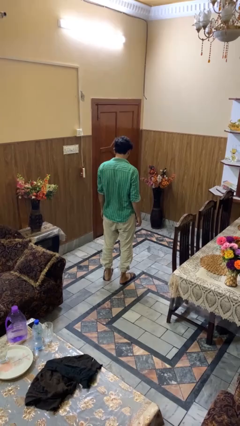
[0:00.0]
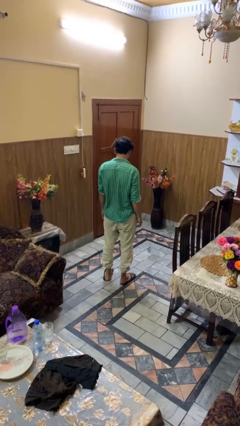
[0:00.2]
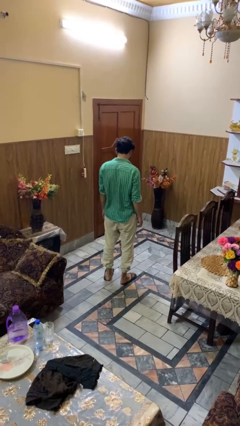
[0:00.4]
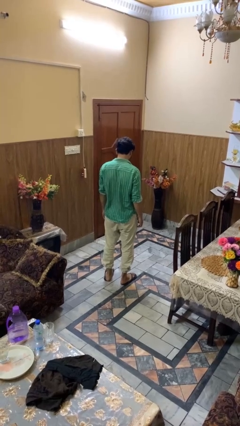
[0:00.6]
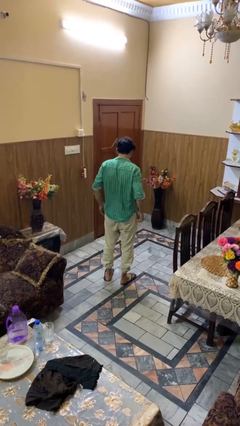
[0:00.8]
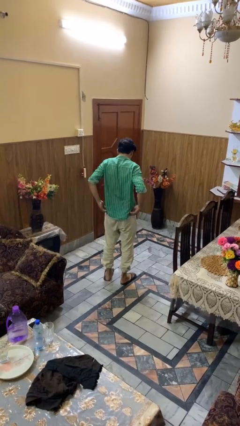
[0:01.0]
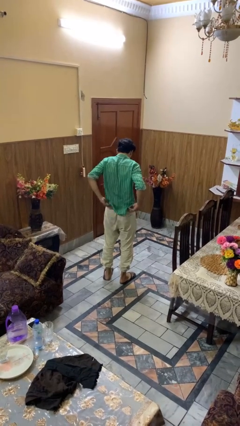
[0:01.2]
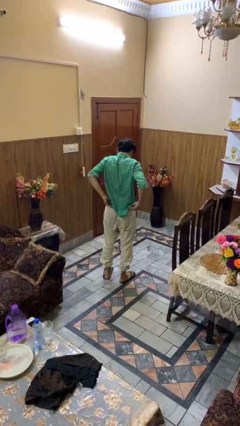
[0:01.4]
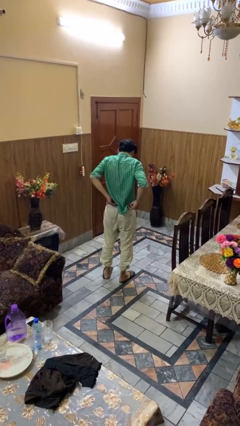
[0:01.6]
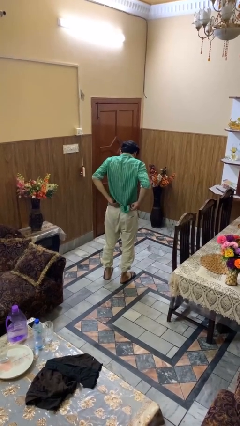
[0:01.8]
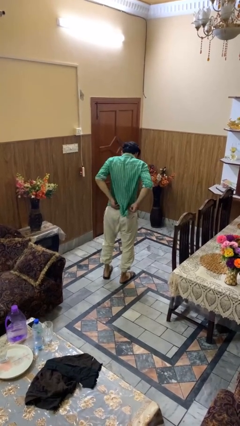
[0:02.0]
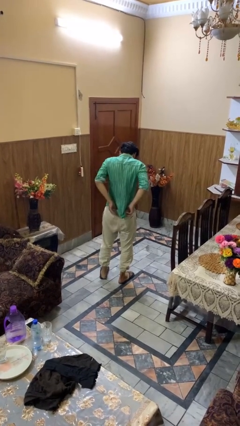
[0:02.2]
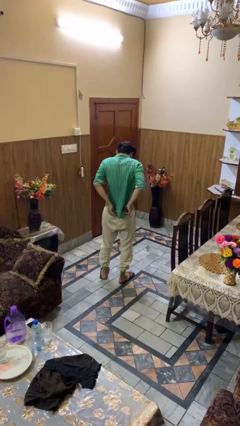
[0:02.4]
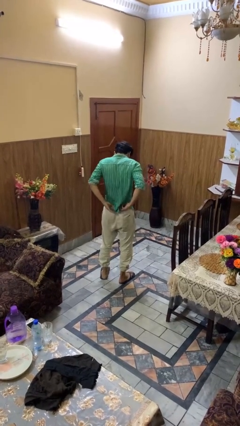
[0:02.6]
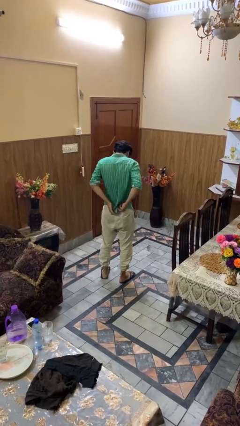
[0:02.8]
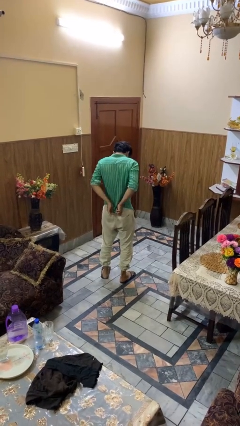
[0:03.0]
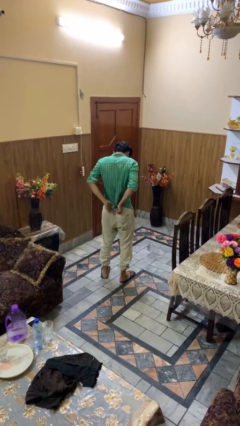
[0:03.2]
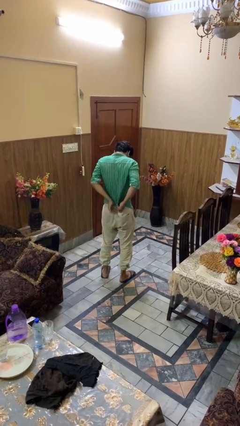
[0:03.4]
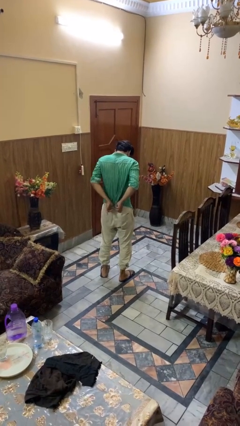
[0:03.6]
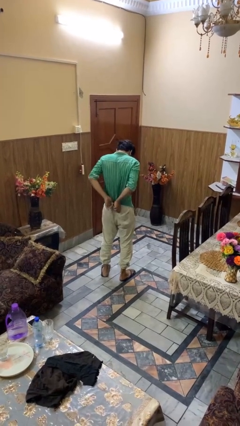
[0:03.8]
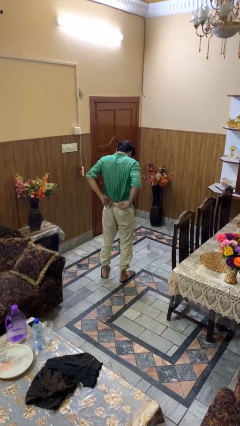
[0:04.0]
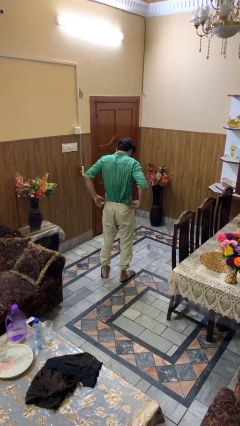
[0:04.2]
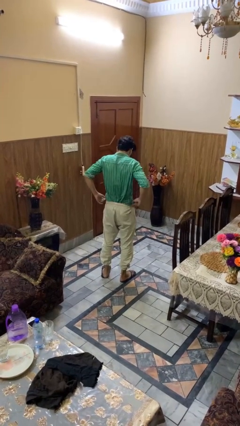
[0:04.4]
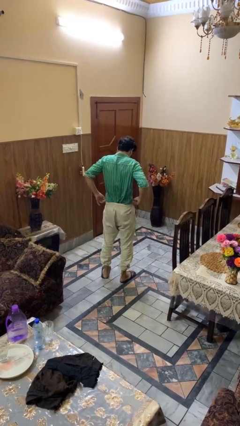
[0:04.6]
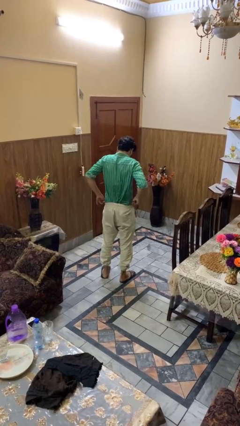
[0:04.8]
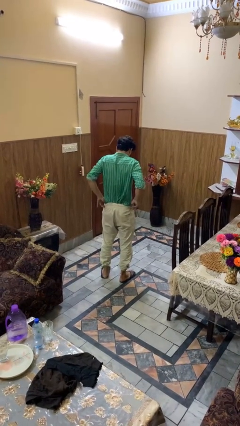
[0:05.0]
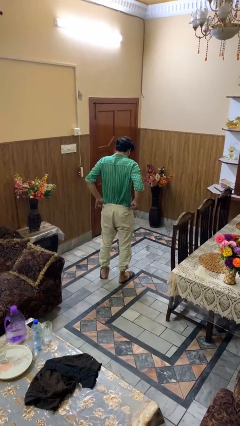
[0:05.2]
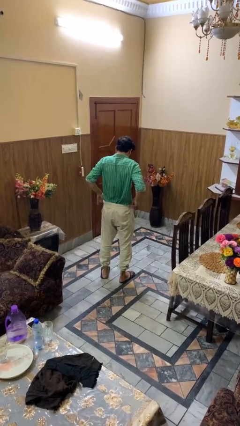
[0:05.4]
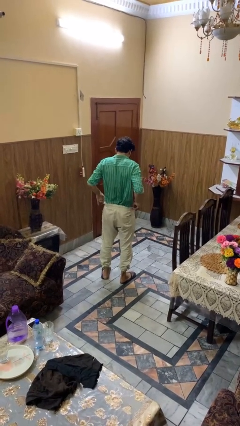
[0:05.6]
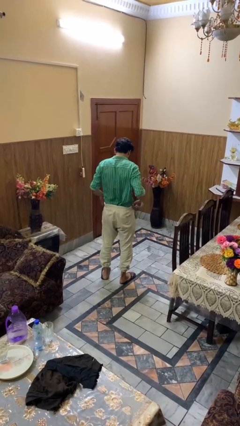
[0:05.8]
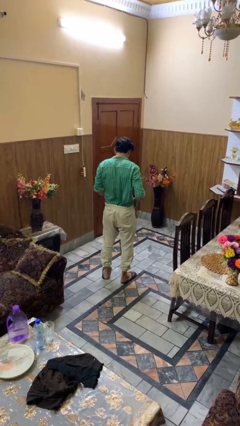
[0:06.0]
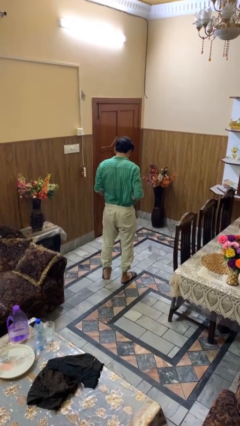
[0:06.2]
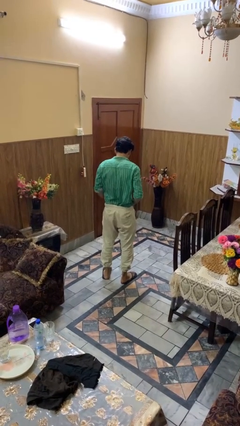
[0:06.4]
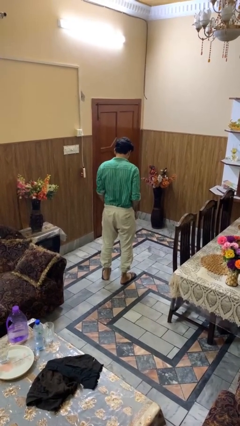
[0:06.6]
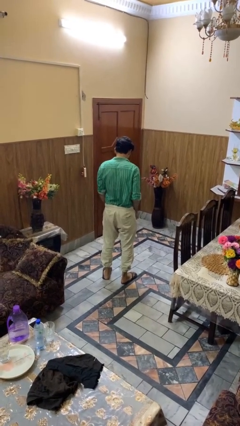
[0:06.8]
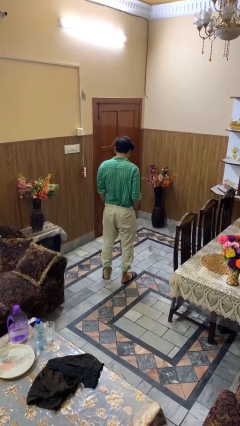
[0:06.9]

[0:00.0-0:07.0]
person tucks in shirt

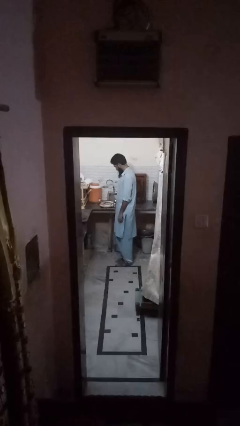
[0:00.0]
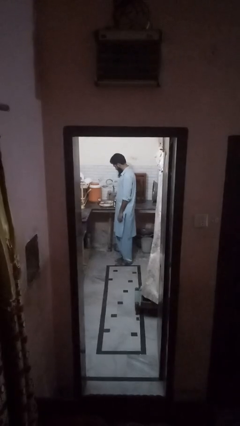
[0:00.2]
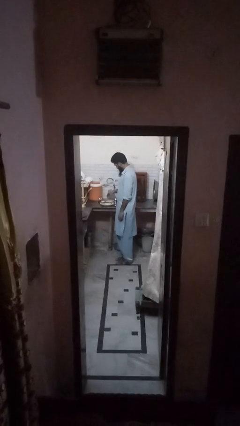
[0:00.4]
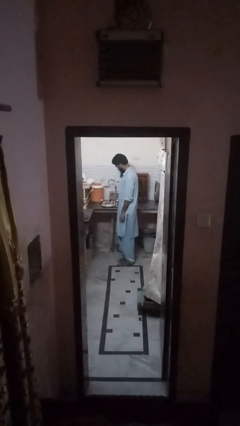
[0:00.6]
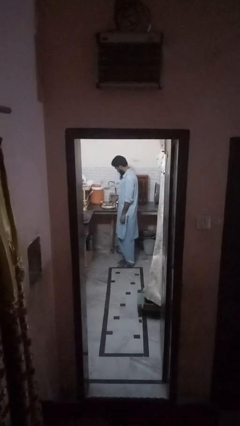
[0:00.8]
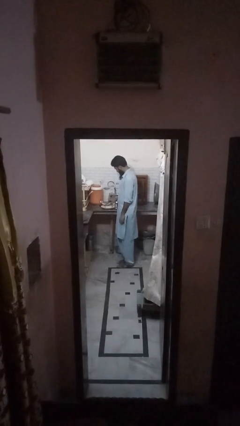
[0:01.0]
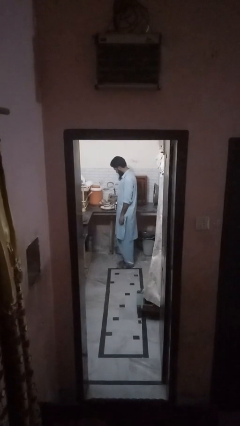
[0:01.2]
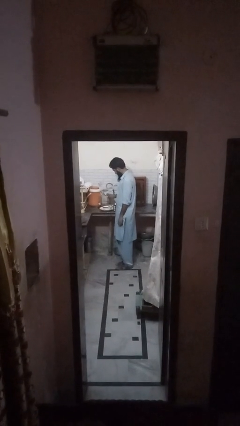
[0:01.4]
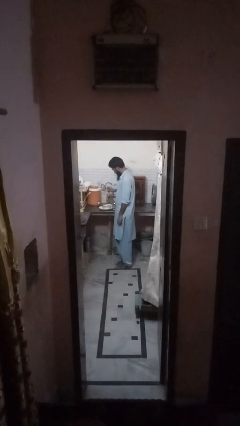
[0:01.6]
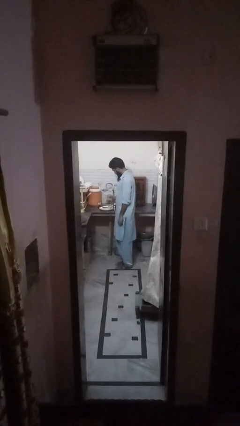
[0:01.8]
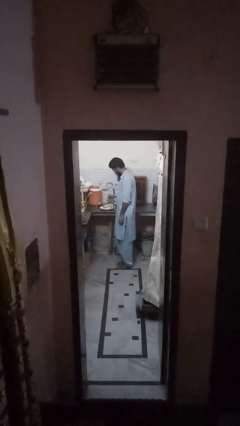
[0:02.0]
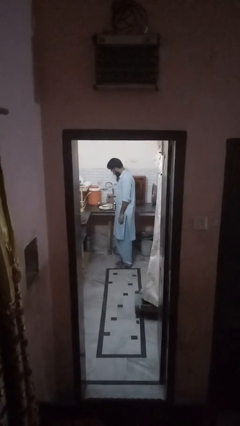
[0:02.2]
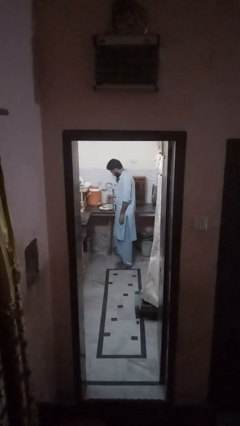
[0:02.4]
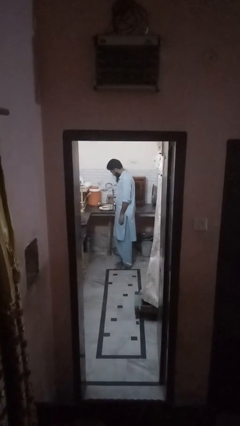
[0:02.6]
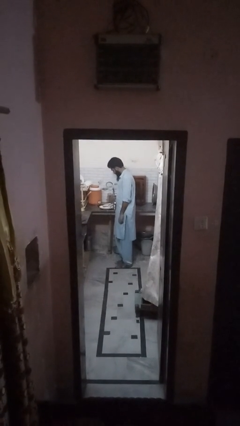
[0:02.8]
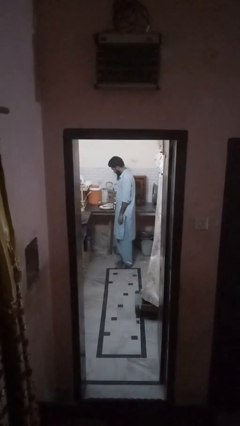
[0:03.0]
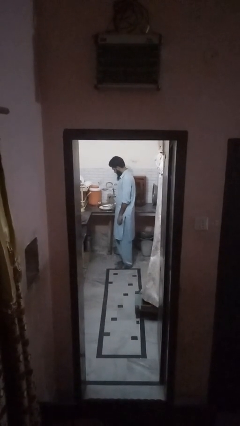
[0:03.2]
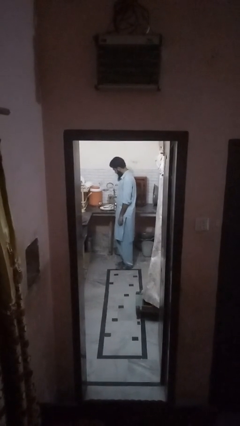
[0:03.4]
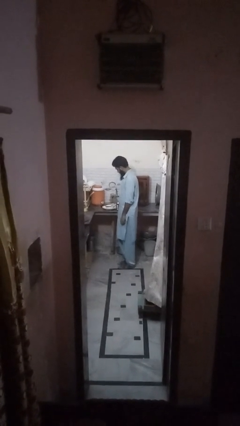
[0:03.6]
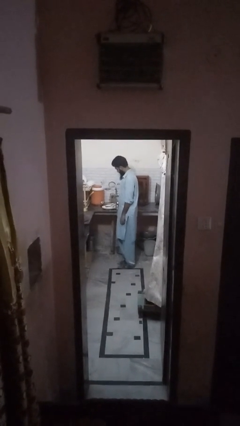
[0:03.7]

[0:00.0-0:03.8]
person loads dishwasher

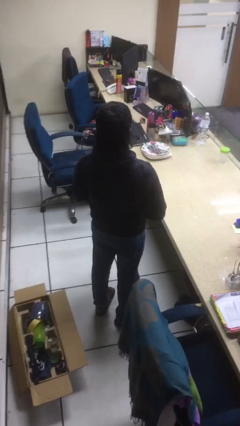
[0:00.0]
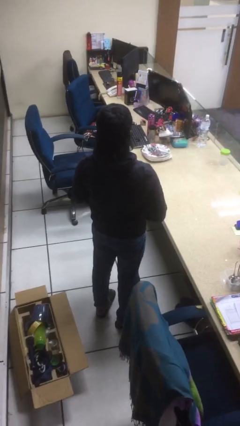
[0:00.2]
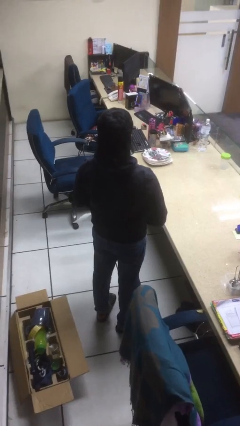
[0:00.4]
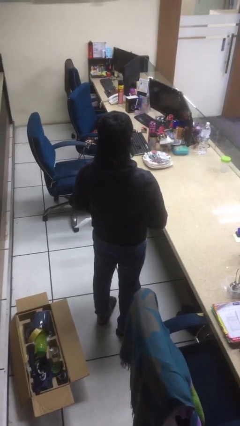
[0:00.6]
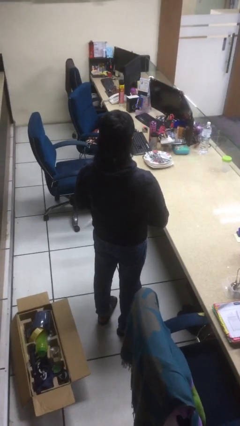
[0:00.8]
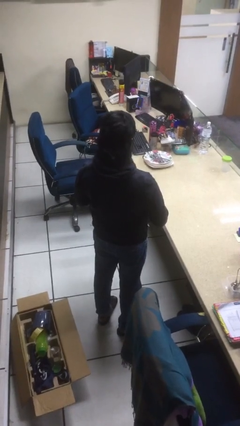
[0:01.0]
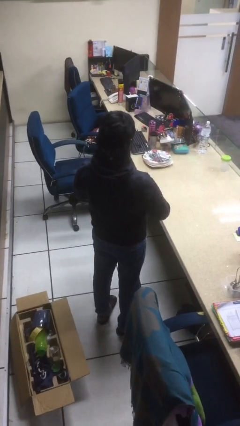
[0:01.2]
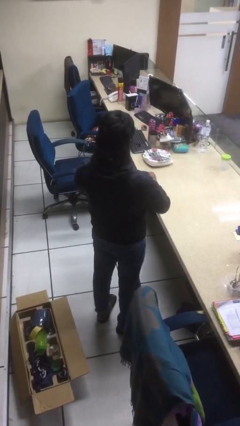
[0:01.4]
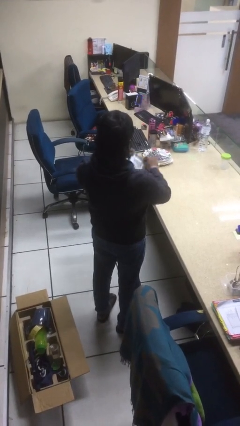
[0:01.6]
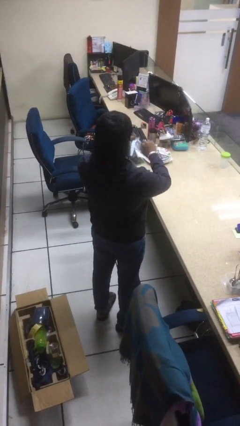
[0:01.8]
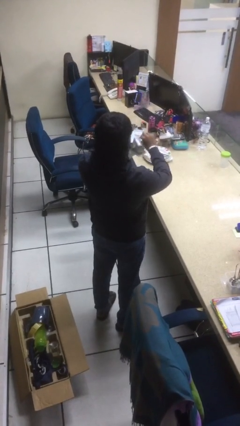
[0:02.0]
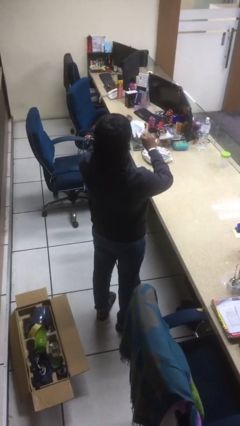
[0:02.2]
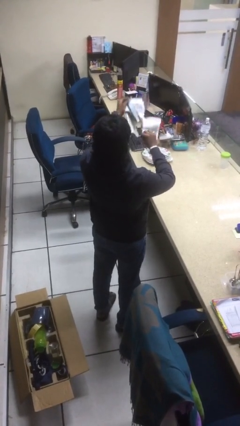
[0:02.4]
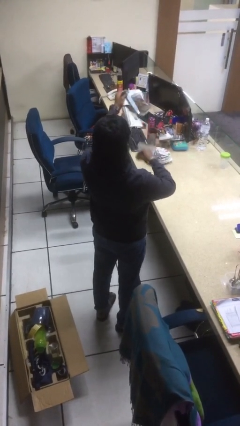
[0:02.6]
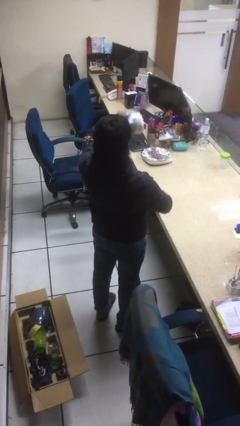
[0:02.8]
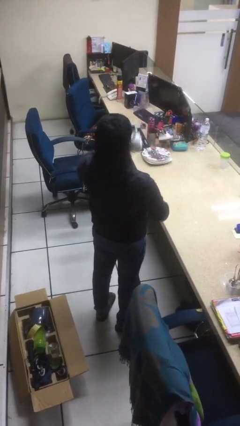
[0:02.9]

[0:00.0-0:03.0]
person tears paper

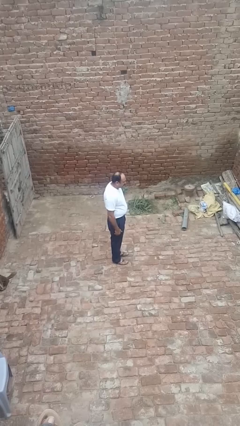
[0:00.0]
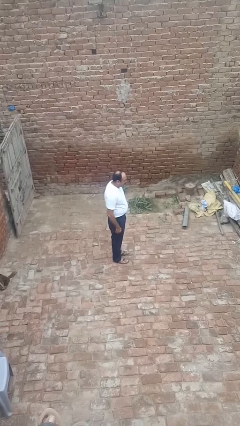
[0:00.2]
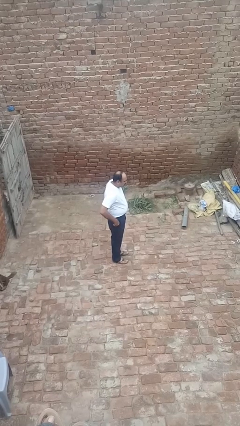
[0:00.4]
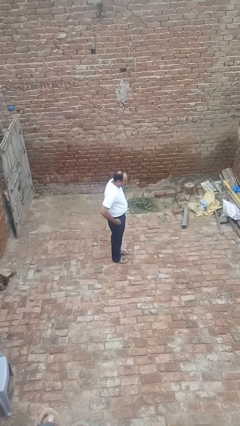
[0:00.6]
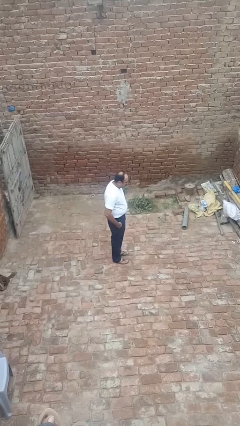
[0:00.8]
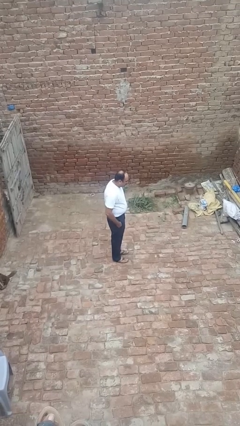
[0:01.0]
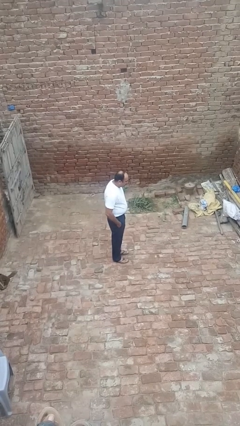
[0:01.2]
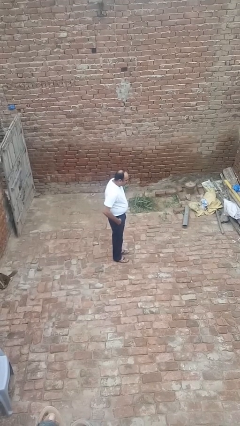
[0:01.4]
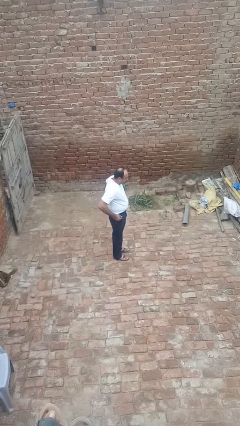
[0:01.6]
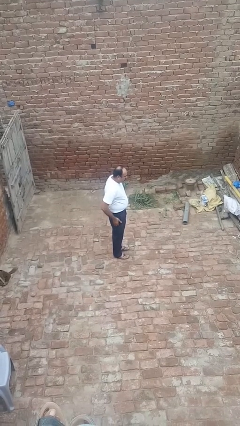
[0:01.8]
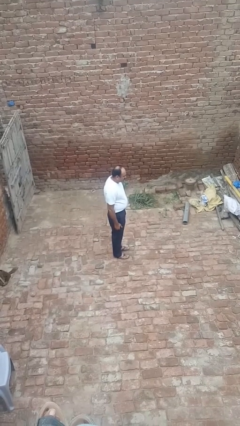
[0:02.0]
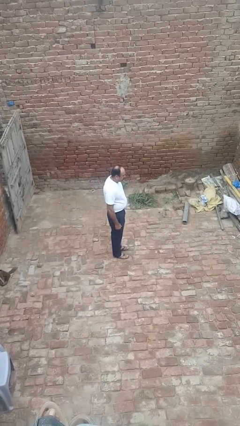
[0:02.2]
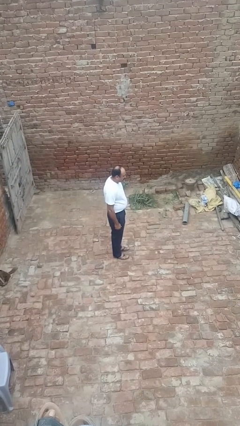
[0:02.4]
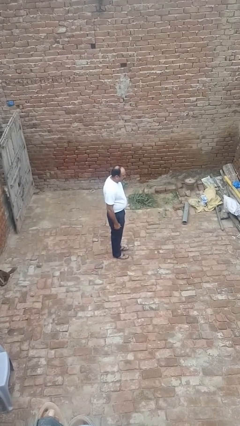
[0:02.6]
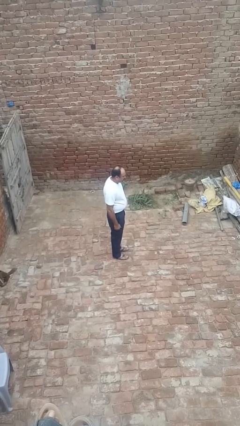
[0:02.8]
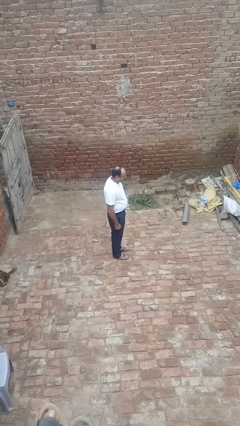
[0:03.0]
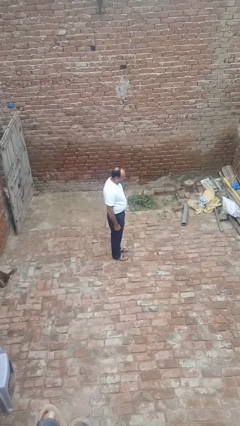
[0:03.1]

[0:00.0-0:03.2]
person puts hands in back pockets

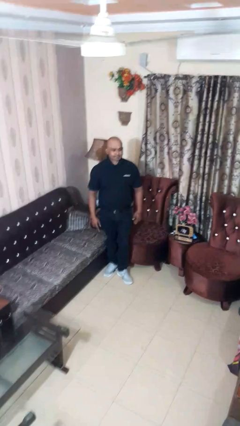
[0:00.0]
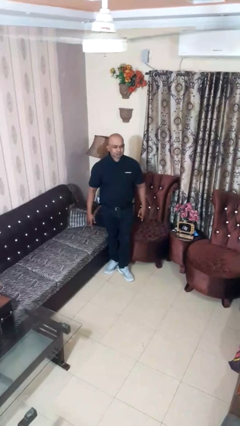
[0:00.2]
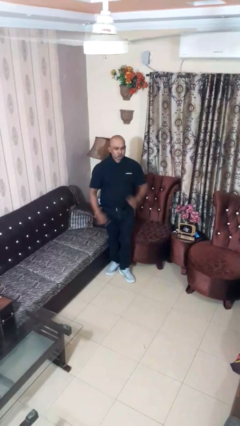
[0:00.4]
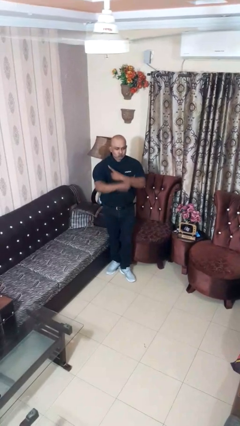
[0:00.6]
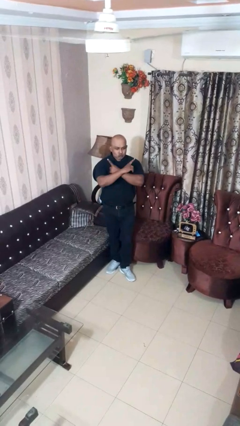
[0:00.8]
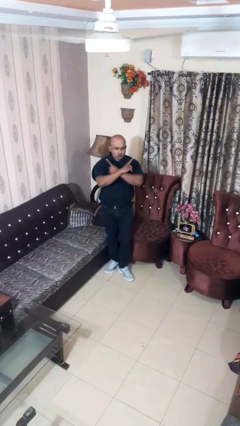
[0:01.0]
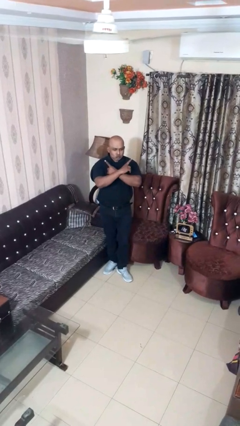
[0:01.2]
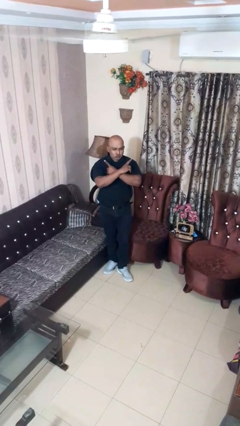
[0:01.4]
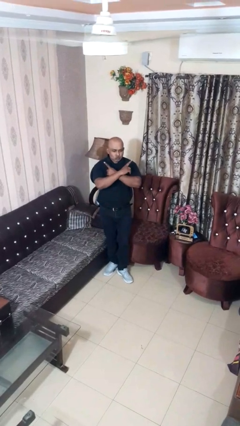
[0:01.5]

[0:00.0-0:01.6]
person gestures arms x
